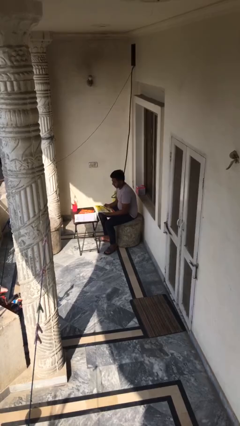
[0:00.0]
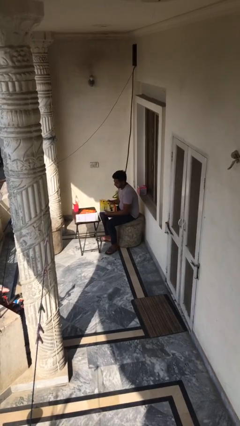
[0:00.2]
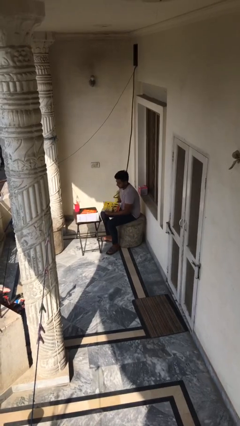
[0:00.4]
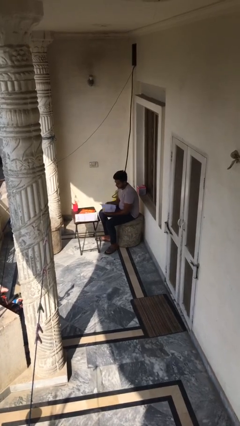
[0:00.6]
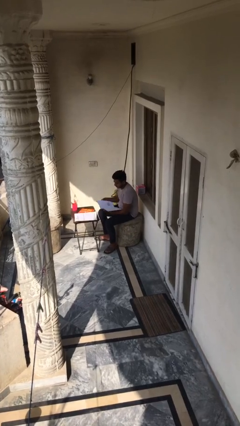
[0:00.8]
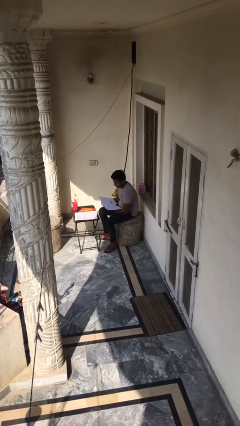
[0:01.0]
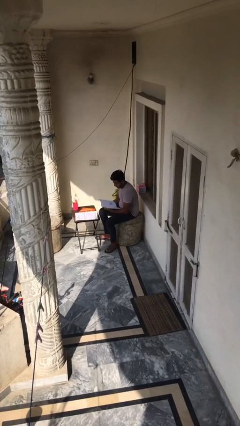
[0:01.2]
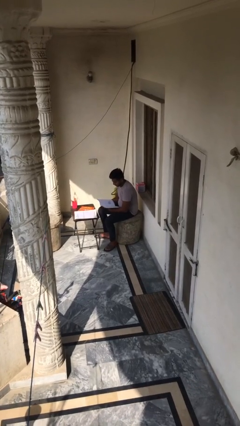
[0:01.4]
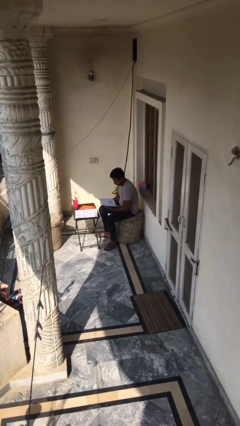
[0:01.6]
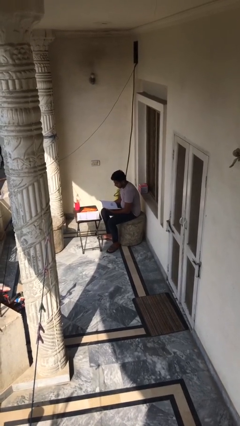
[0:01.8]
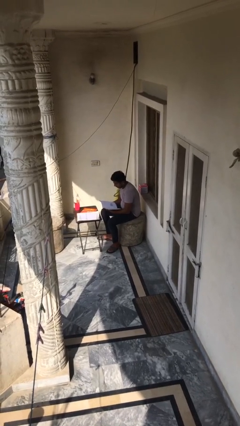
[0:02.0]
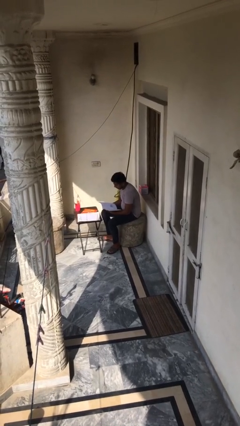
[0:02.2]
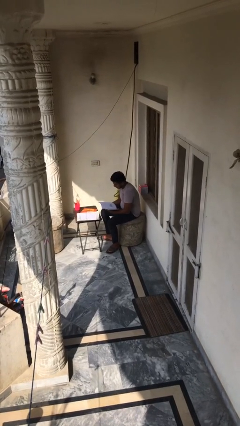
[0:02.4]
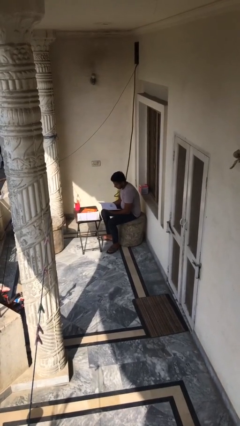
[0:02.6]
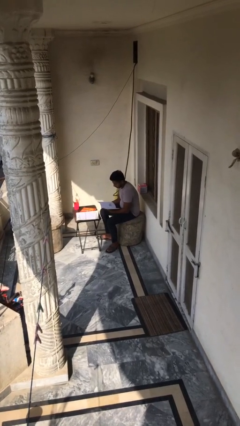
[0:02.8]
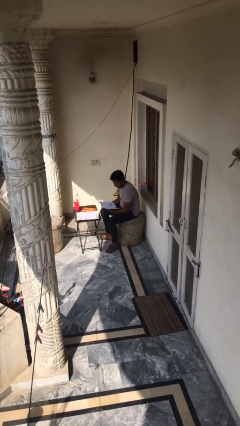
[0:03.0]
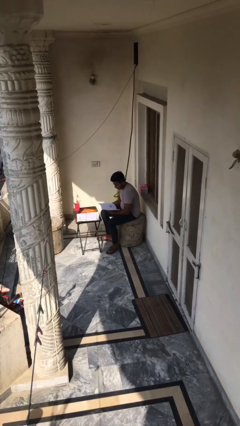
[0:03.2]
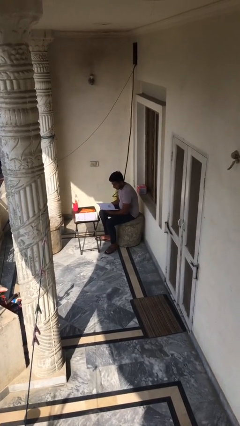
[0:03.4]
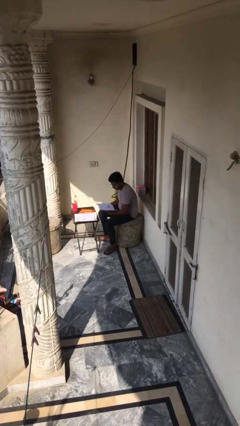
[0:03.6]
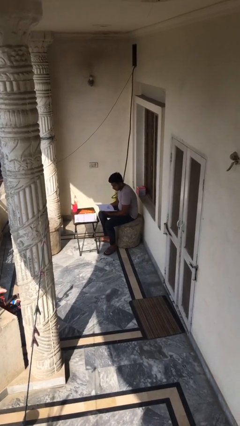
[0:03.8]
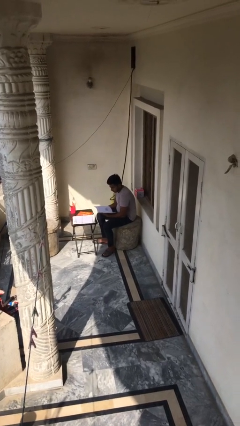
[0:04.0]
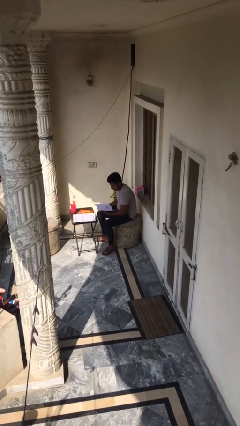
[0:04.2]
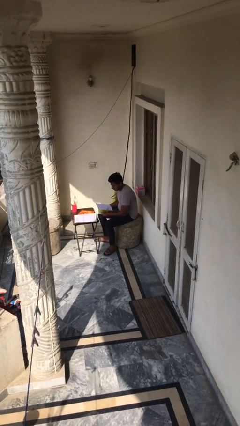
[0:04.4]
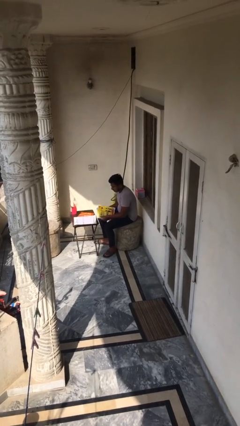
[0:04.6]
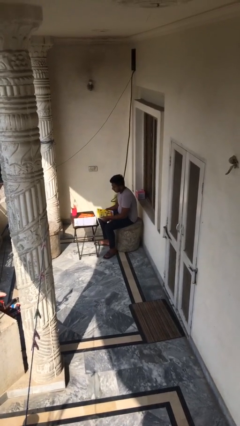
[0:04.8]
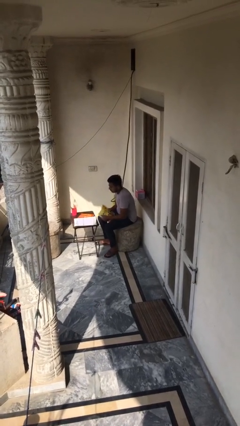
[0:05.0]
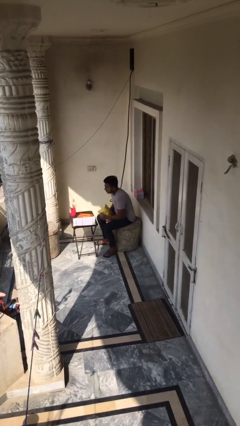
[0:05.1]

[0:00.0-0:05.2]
person reads document

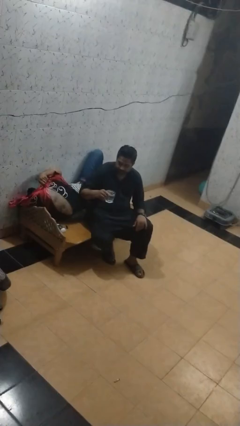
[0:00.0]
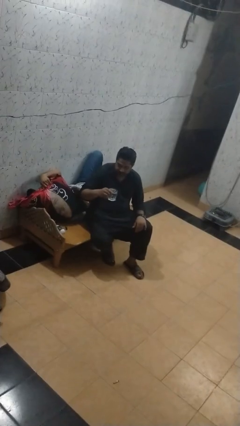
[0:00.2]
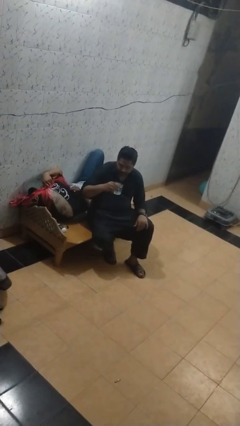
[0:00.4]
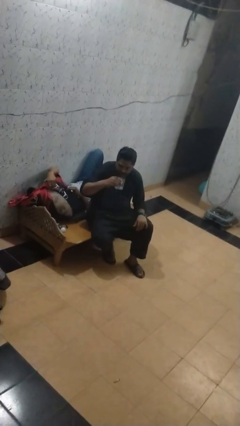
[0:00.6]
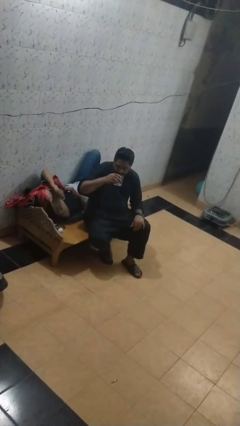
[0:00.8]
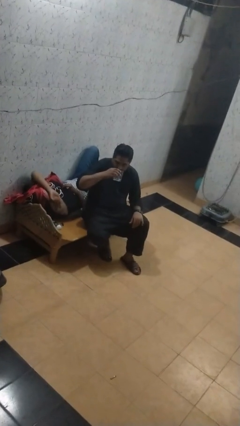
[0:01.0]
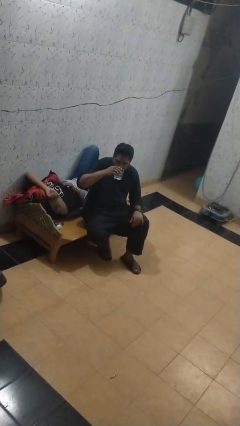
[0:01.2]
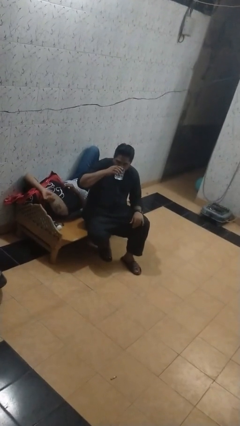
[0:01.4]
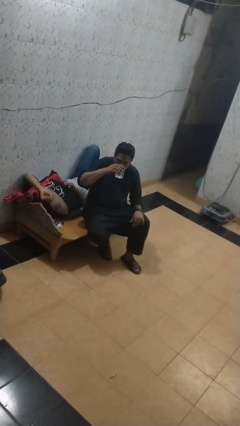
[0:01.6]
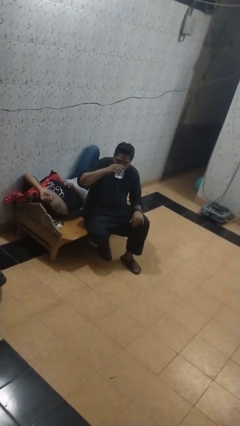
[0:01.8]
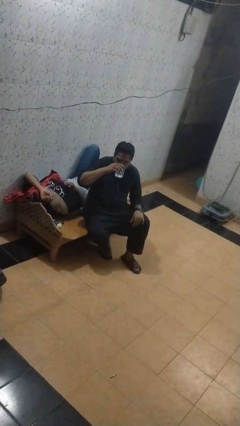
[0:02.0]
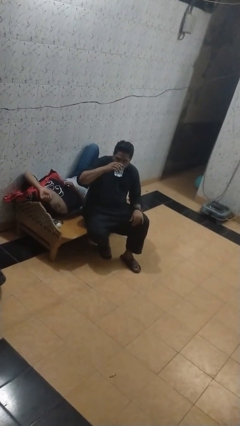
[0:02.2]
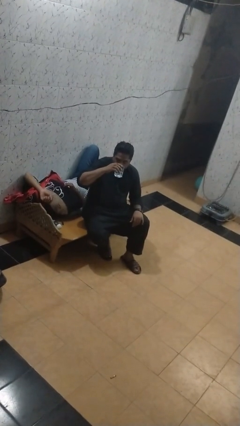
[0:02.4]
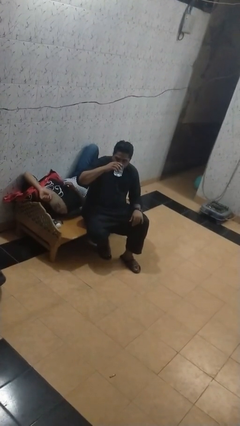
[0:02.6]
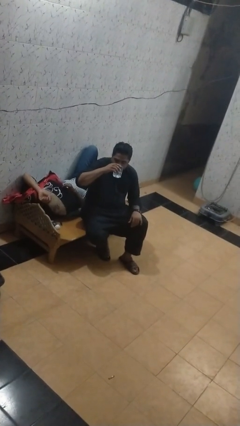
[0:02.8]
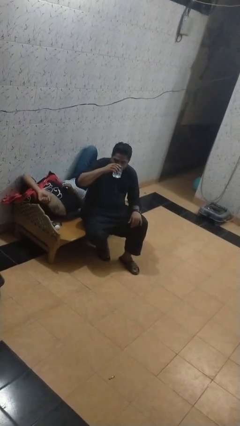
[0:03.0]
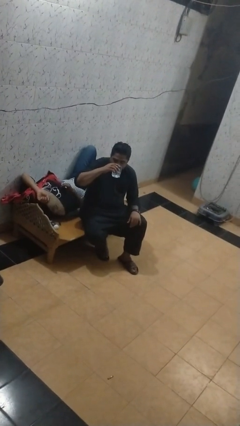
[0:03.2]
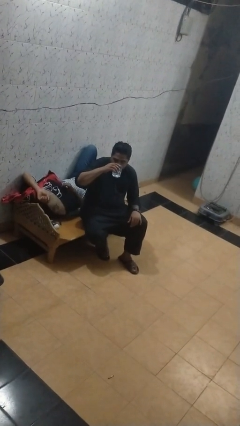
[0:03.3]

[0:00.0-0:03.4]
person drinks from mug

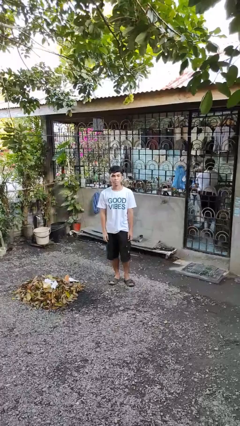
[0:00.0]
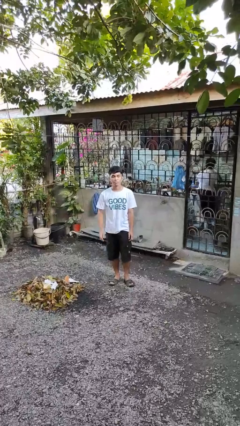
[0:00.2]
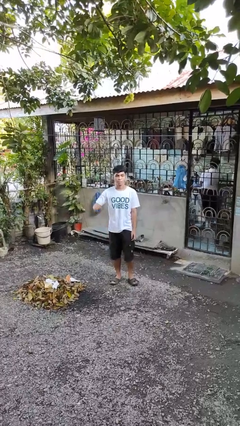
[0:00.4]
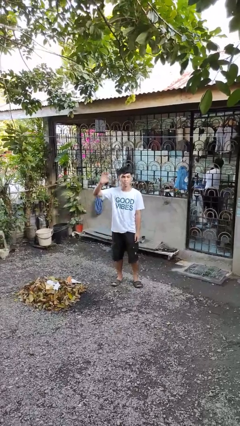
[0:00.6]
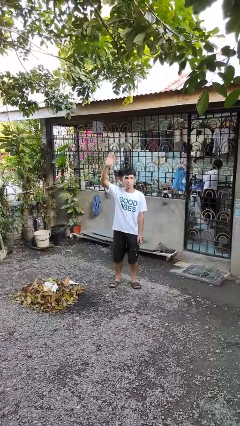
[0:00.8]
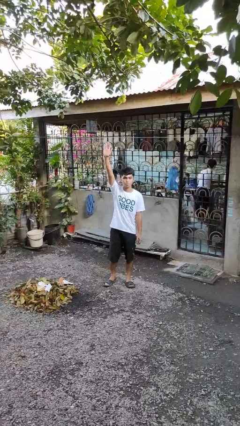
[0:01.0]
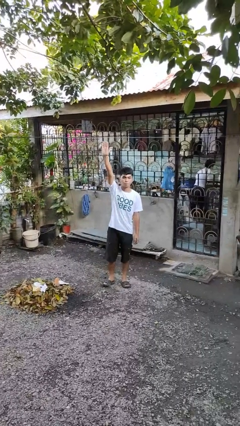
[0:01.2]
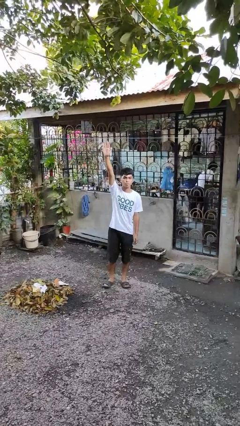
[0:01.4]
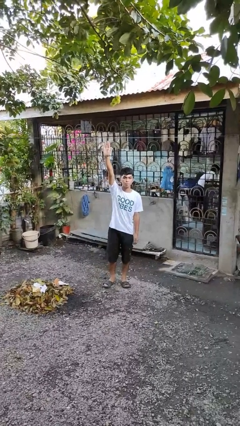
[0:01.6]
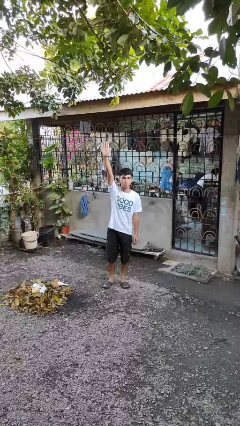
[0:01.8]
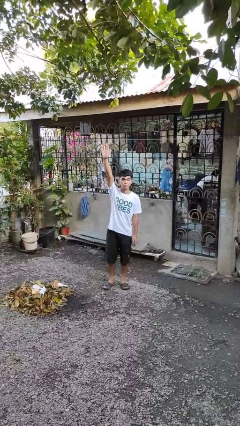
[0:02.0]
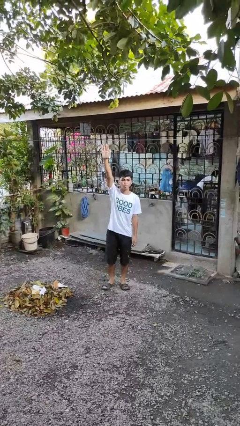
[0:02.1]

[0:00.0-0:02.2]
person gestures raise hand

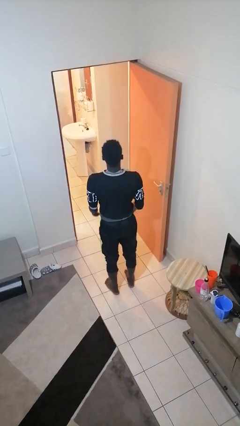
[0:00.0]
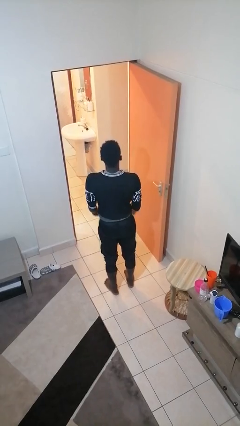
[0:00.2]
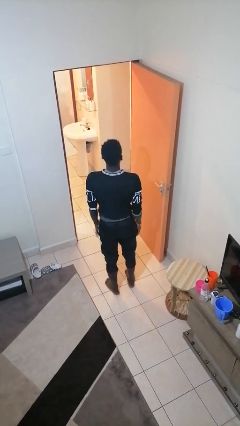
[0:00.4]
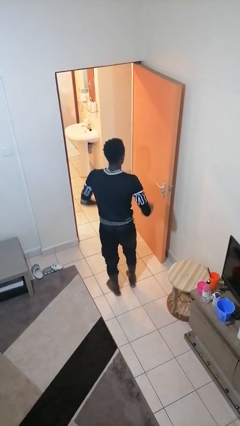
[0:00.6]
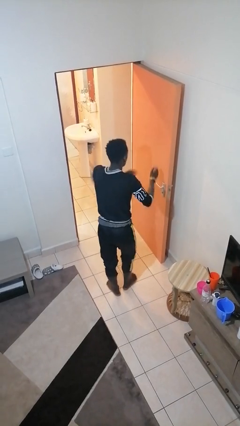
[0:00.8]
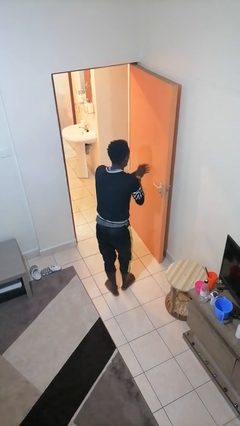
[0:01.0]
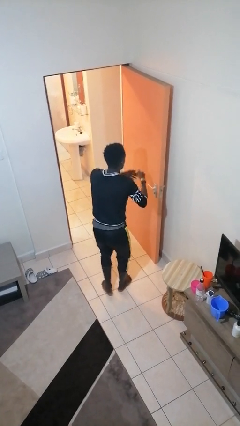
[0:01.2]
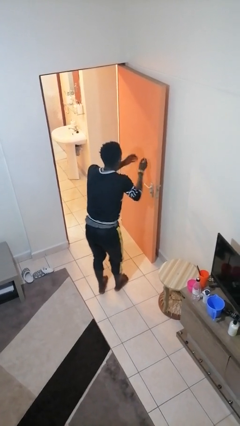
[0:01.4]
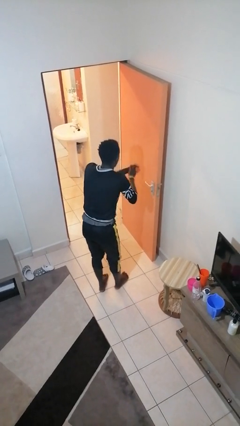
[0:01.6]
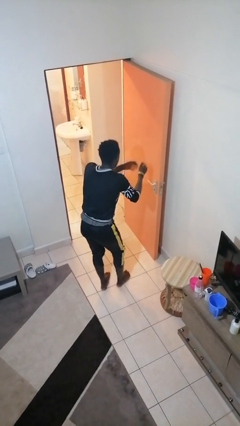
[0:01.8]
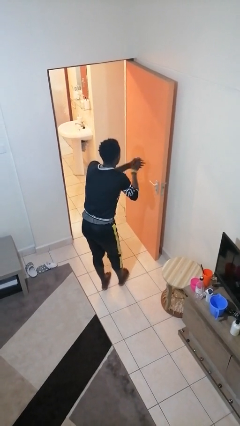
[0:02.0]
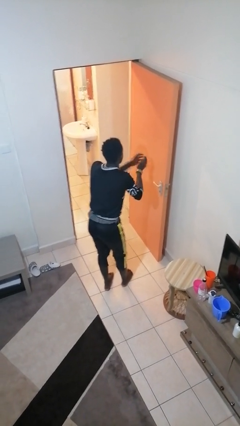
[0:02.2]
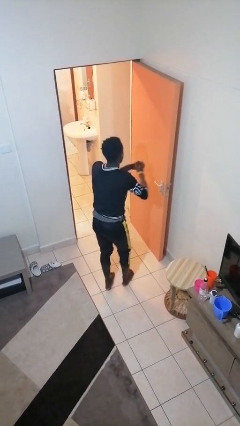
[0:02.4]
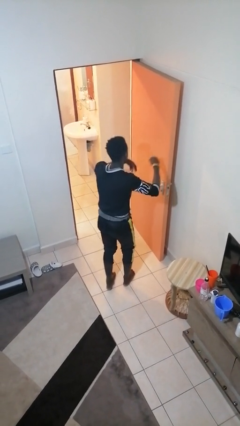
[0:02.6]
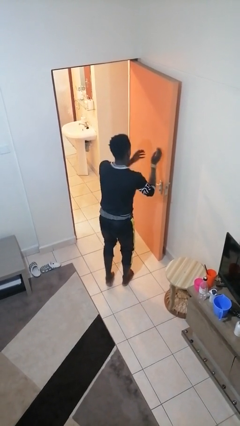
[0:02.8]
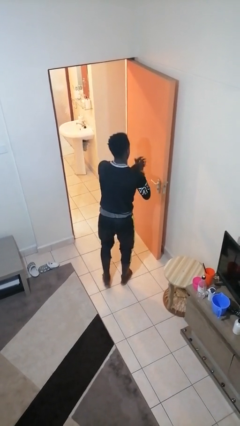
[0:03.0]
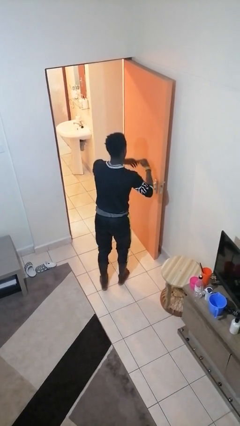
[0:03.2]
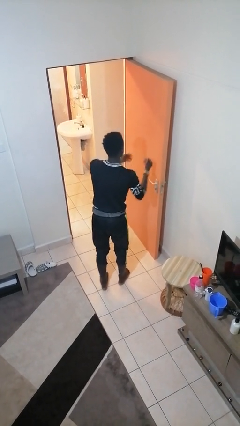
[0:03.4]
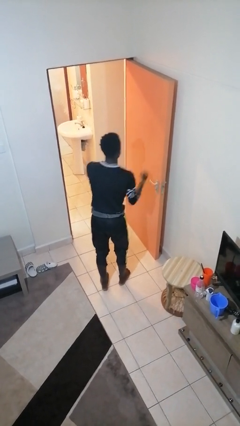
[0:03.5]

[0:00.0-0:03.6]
person claps hands

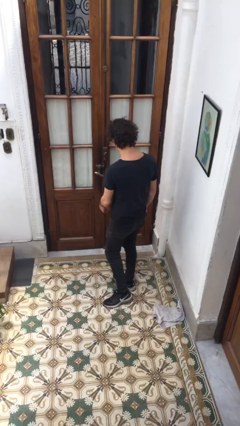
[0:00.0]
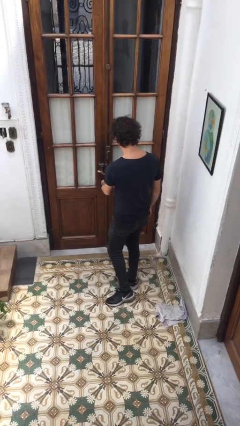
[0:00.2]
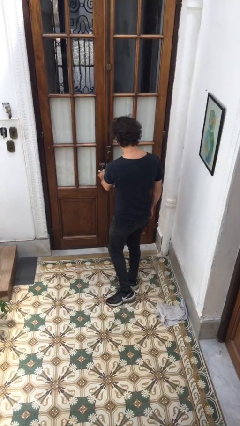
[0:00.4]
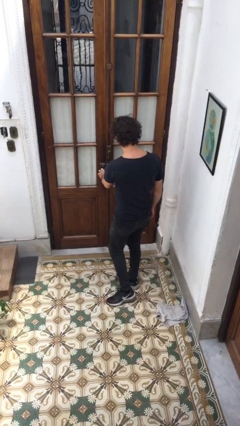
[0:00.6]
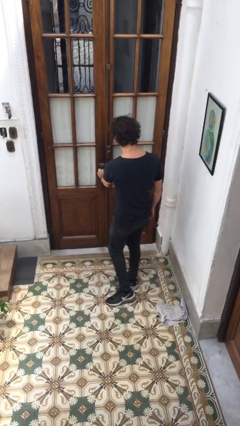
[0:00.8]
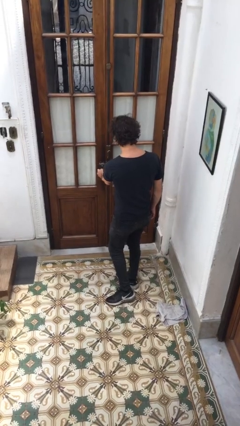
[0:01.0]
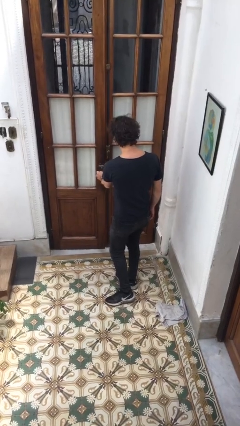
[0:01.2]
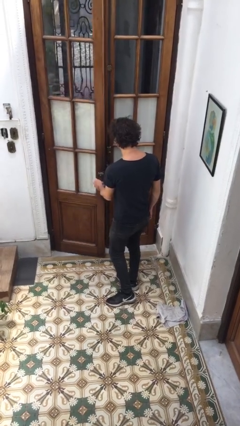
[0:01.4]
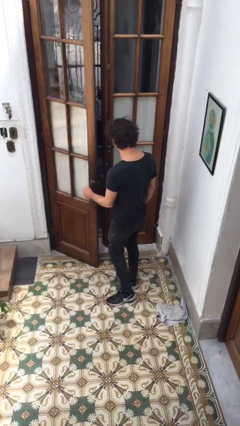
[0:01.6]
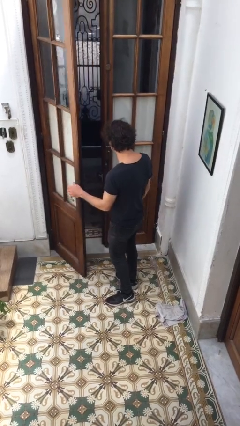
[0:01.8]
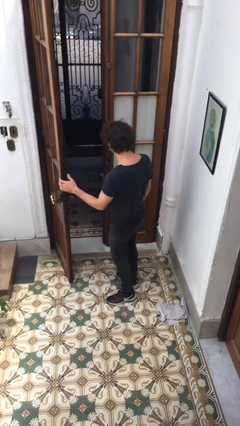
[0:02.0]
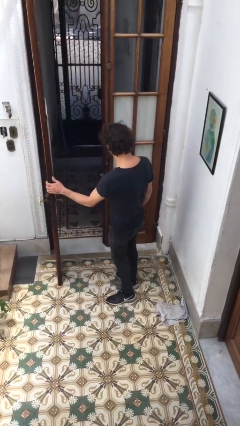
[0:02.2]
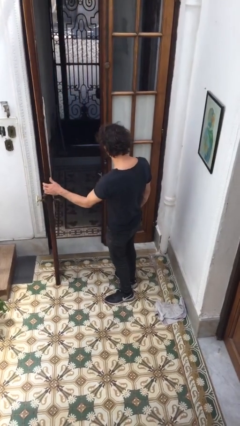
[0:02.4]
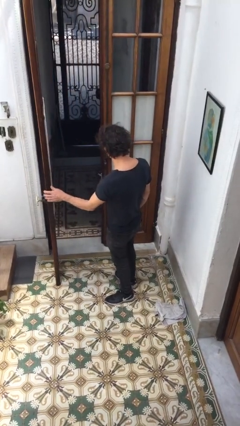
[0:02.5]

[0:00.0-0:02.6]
person opens facility door

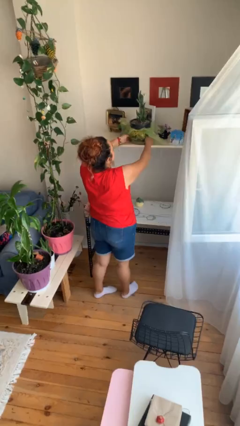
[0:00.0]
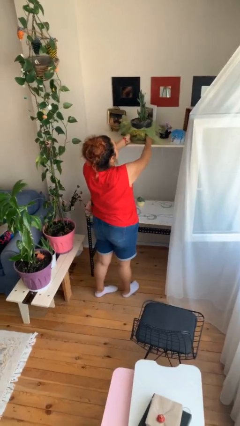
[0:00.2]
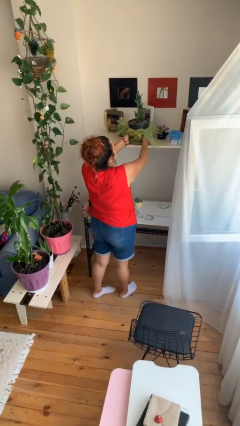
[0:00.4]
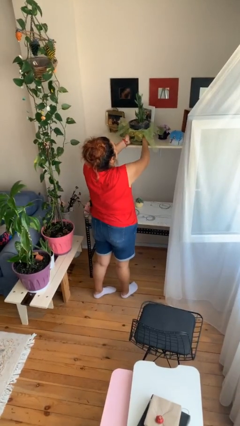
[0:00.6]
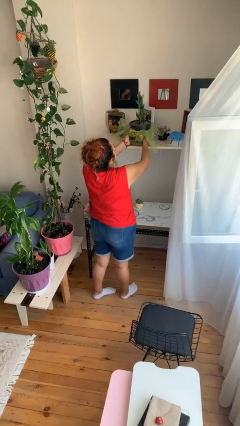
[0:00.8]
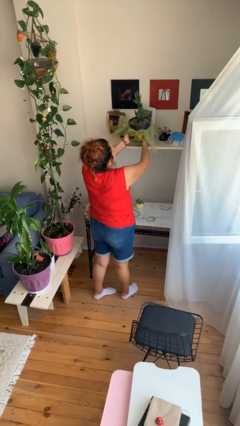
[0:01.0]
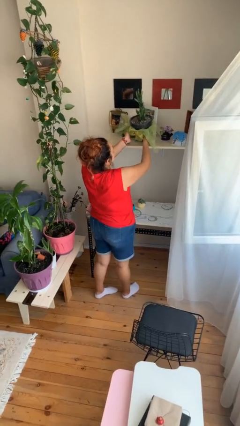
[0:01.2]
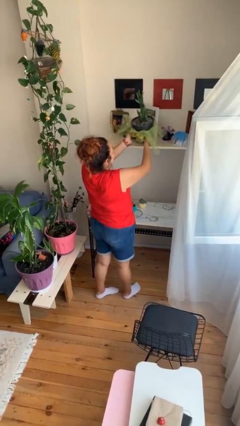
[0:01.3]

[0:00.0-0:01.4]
person picks up object from shelf
